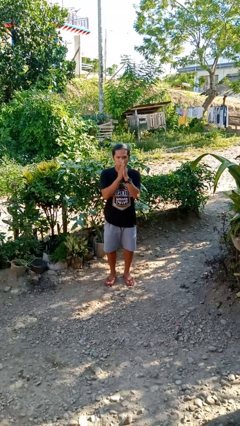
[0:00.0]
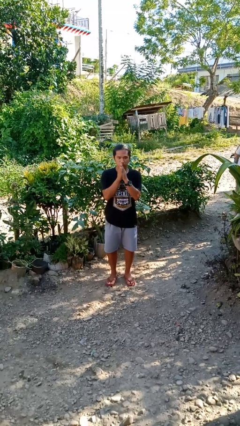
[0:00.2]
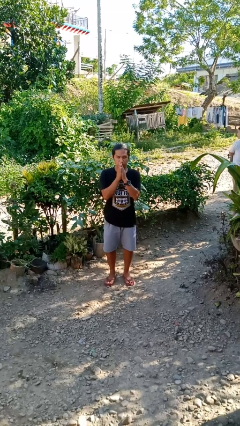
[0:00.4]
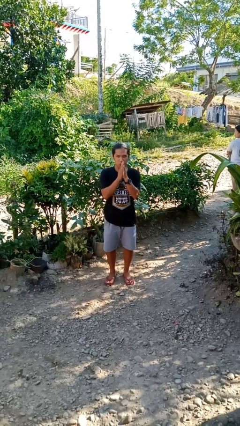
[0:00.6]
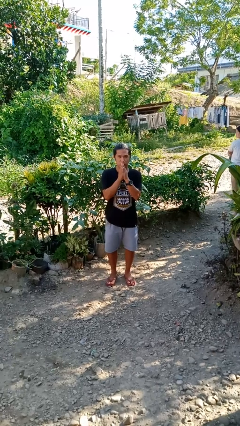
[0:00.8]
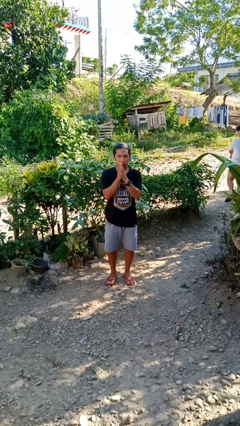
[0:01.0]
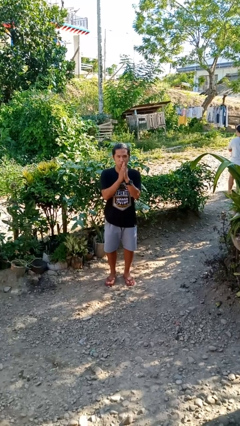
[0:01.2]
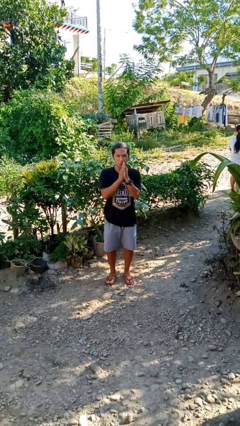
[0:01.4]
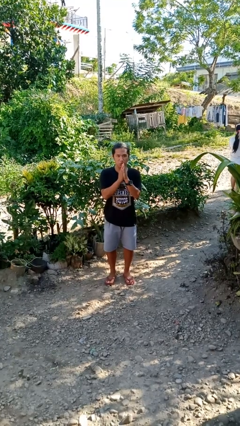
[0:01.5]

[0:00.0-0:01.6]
person blows into hands

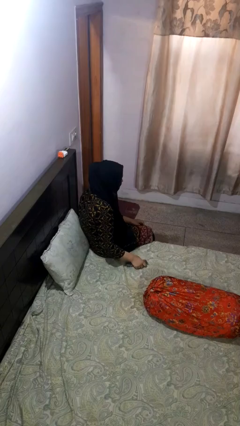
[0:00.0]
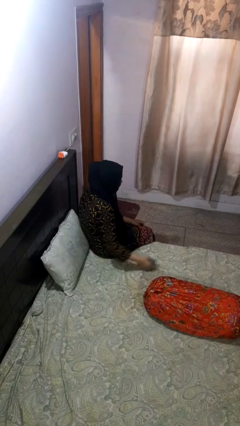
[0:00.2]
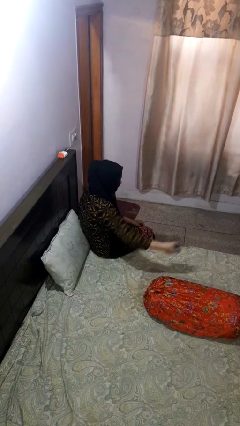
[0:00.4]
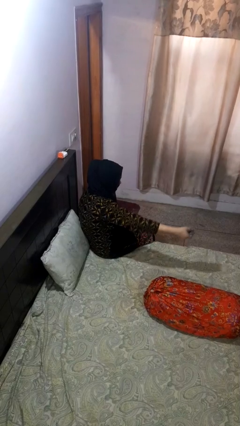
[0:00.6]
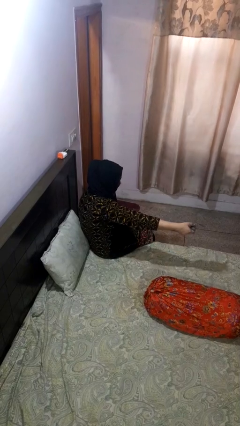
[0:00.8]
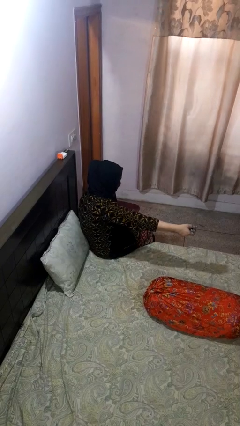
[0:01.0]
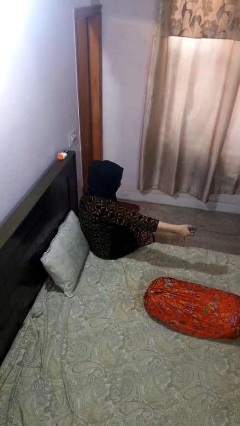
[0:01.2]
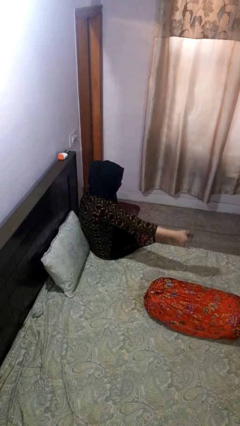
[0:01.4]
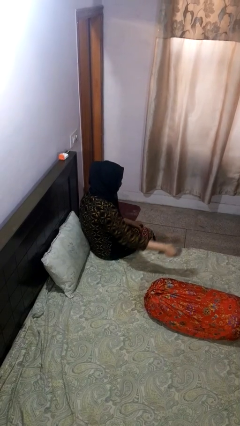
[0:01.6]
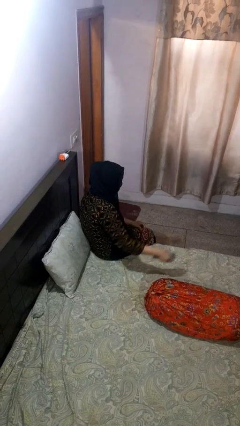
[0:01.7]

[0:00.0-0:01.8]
person uses television remote

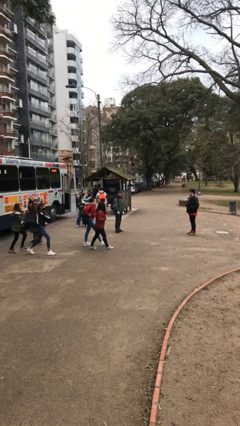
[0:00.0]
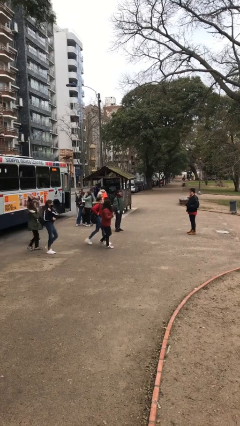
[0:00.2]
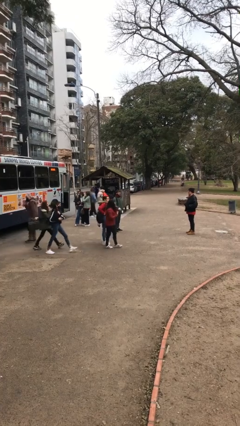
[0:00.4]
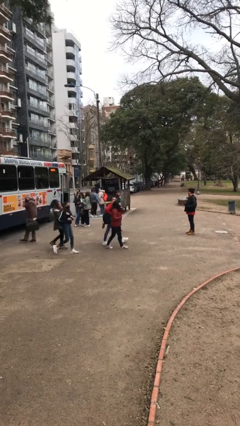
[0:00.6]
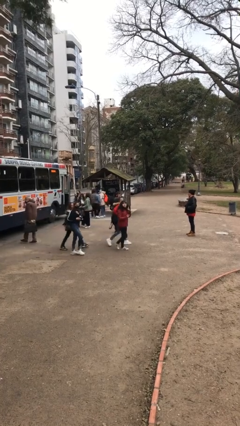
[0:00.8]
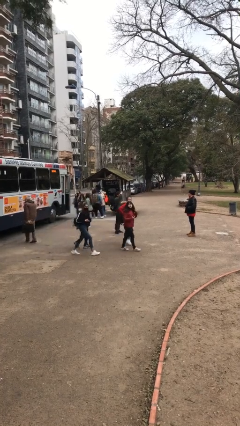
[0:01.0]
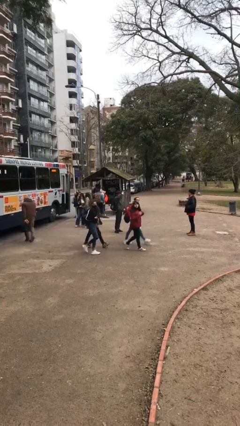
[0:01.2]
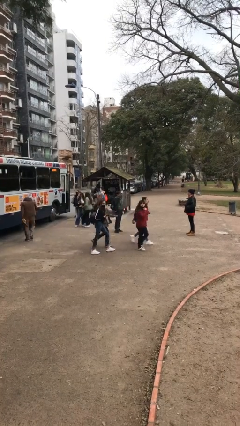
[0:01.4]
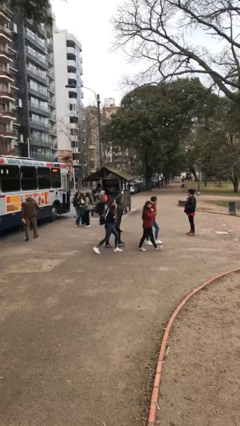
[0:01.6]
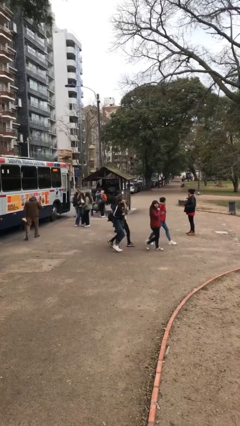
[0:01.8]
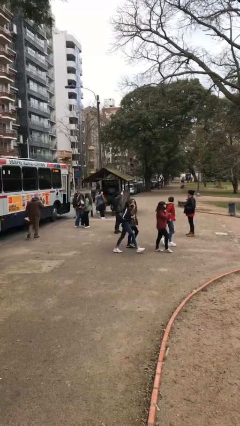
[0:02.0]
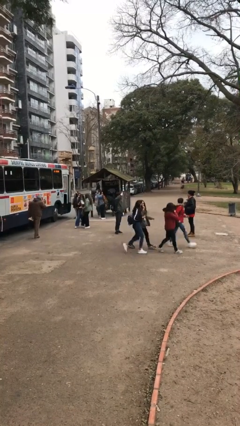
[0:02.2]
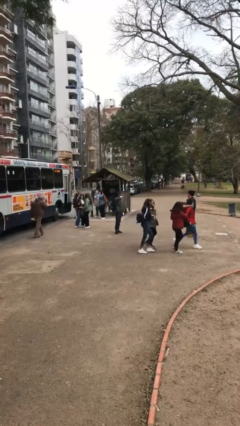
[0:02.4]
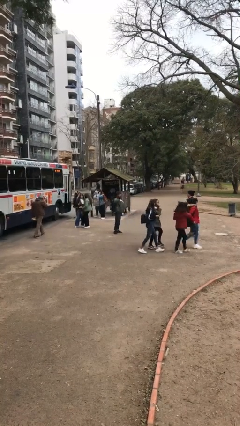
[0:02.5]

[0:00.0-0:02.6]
person waves at person

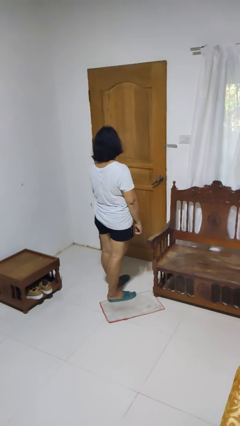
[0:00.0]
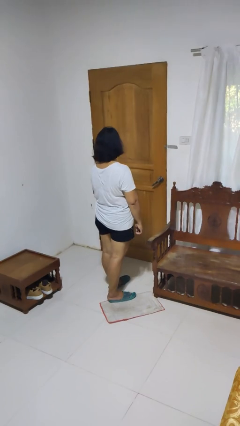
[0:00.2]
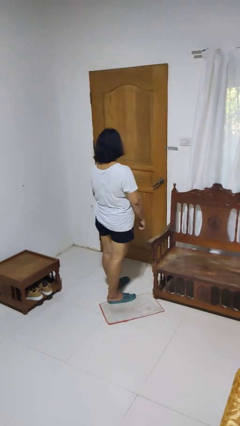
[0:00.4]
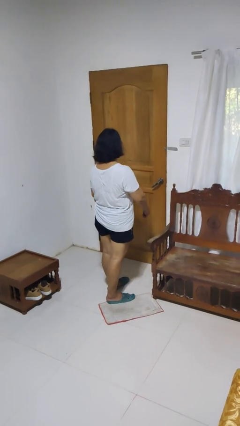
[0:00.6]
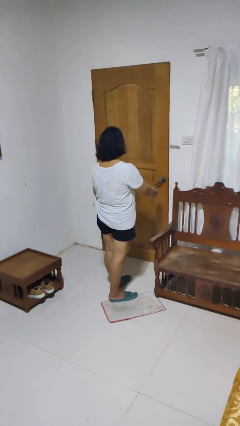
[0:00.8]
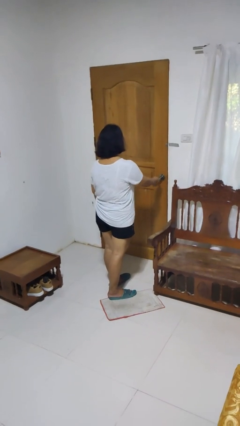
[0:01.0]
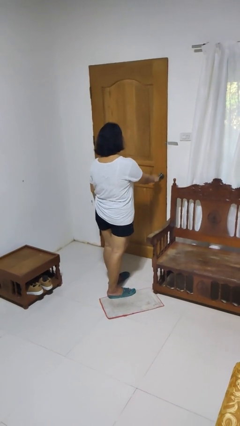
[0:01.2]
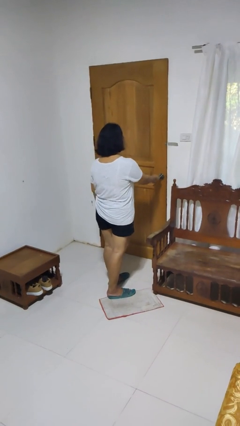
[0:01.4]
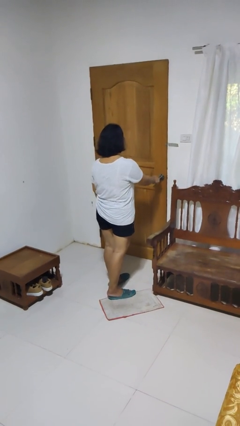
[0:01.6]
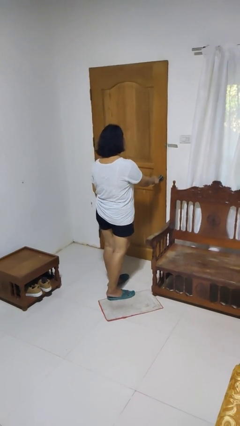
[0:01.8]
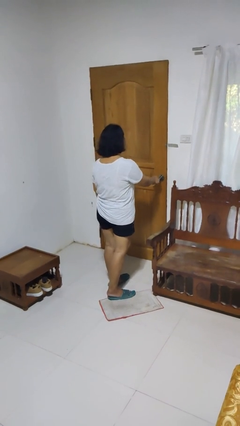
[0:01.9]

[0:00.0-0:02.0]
person unlocks door with keys

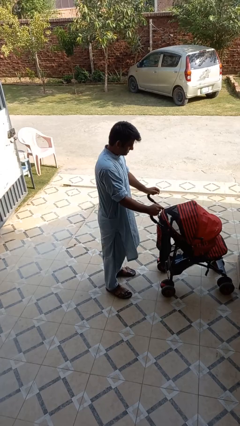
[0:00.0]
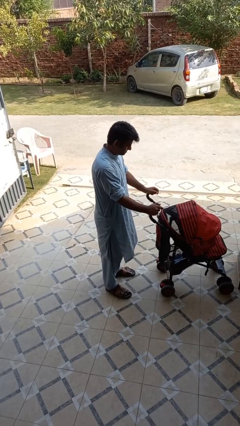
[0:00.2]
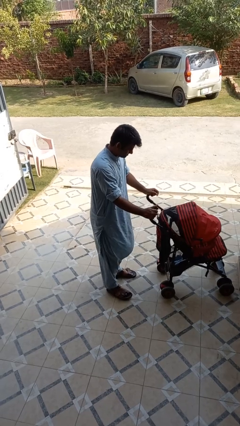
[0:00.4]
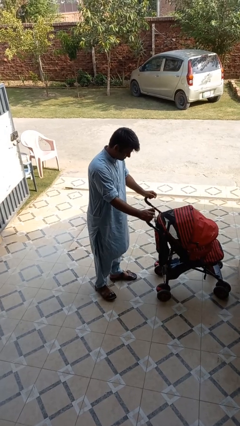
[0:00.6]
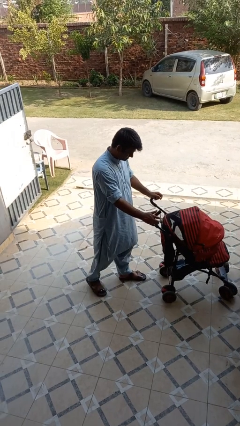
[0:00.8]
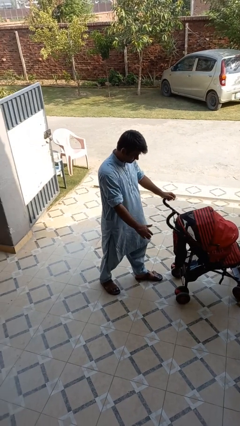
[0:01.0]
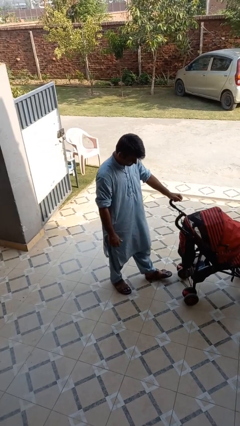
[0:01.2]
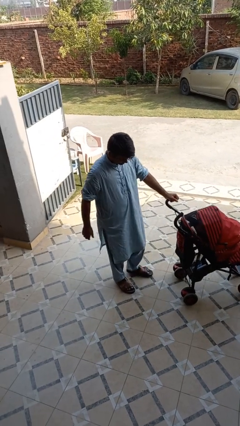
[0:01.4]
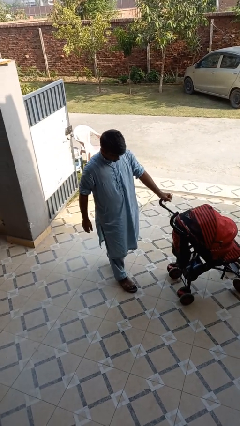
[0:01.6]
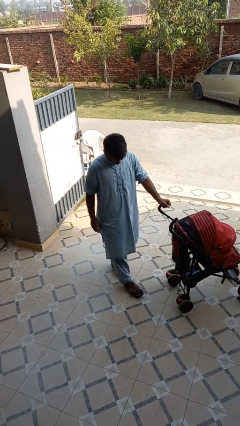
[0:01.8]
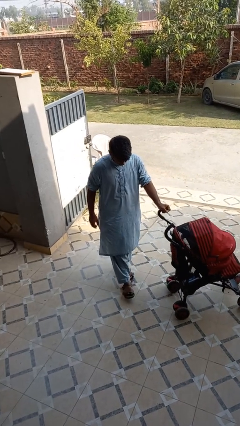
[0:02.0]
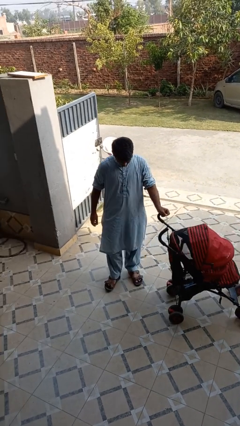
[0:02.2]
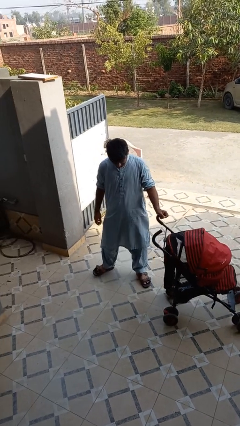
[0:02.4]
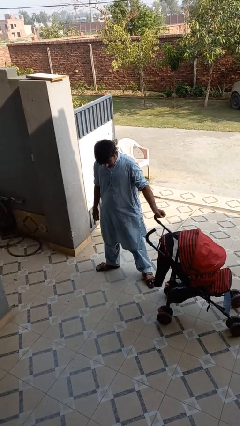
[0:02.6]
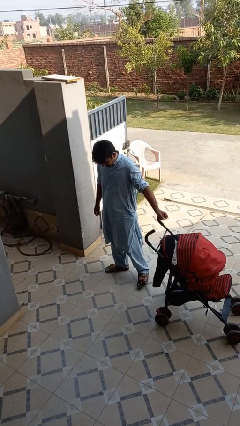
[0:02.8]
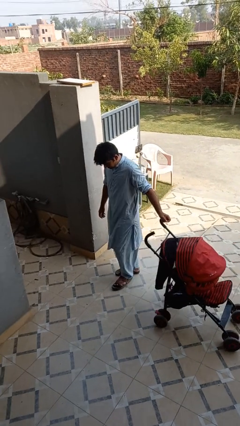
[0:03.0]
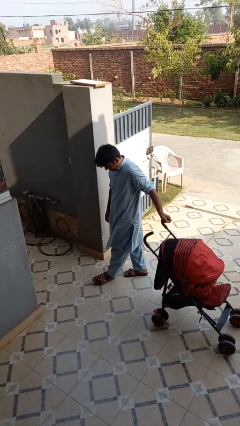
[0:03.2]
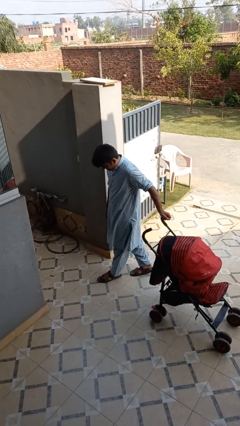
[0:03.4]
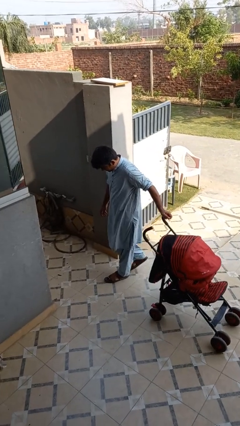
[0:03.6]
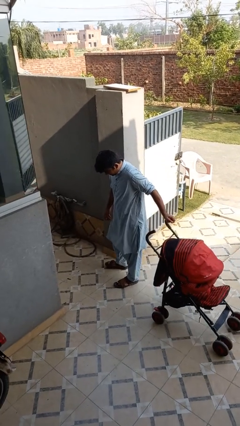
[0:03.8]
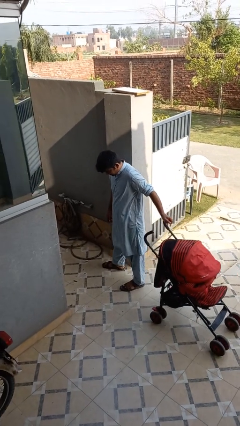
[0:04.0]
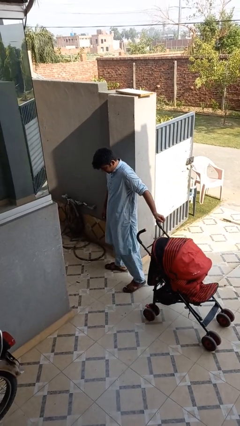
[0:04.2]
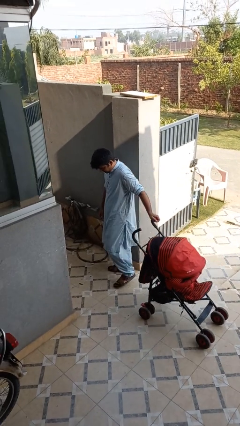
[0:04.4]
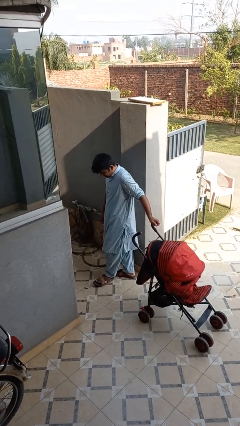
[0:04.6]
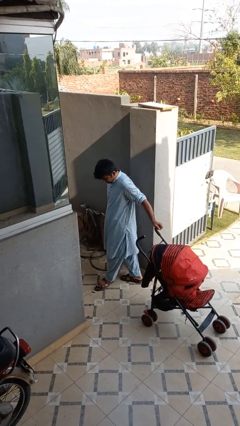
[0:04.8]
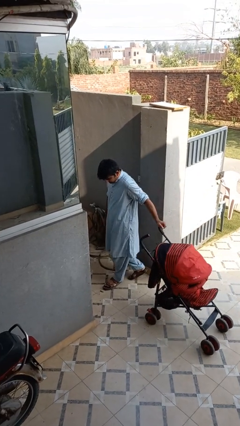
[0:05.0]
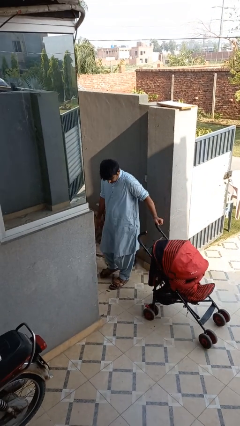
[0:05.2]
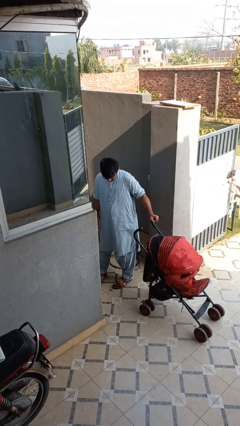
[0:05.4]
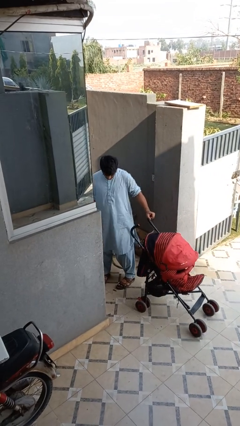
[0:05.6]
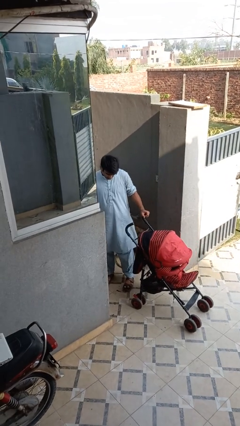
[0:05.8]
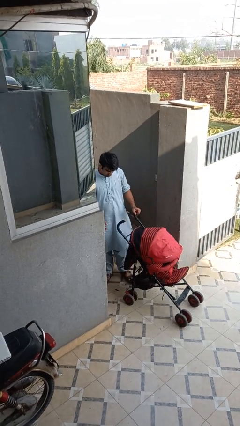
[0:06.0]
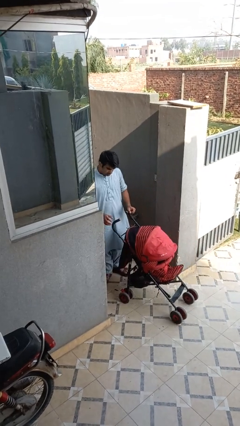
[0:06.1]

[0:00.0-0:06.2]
person pulls wheeled cart

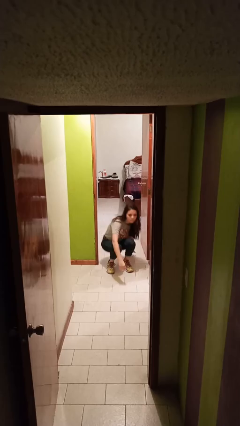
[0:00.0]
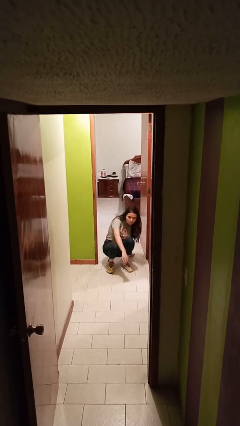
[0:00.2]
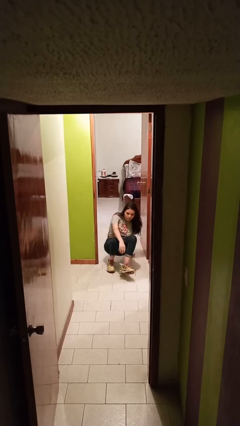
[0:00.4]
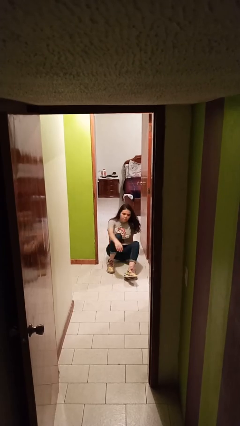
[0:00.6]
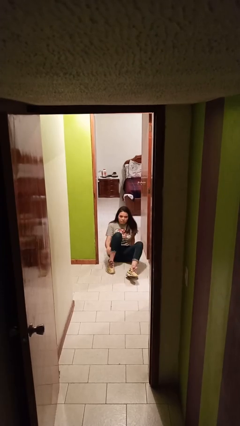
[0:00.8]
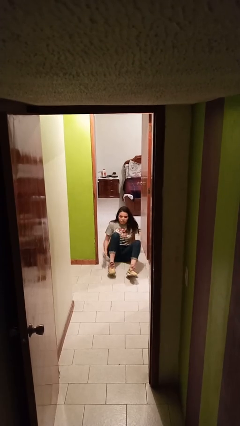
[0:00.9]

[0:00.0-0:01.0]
person sits down

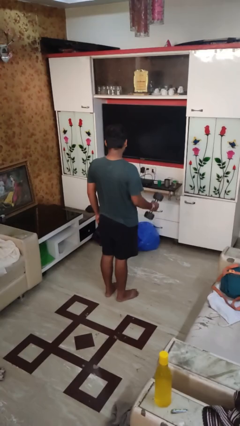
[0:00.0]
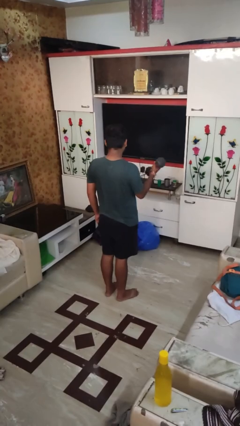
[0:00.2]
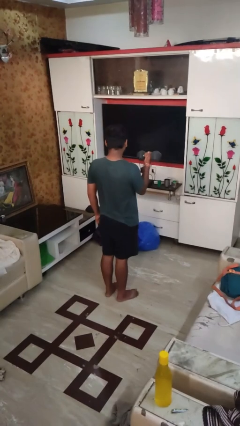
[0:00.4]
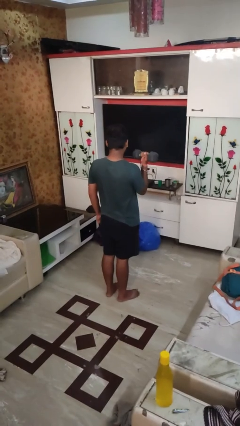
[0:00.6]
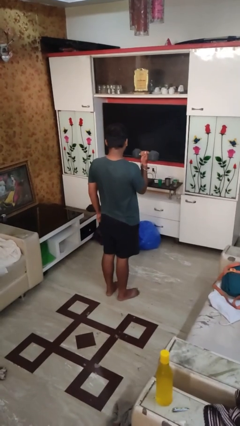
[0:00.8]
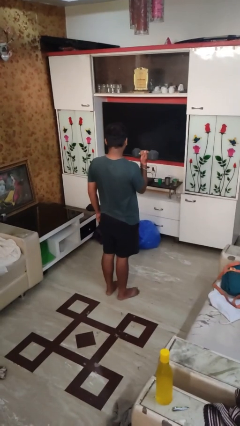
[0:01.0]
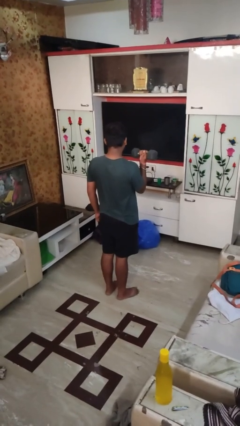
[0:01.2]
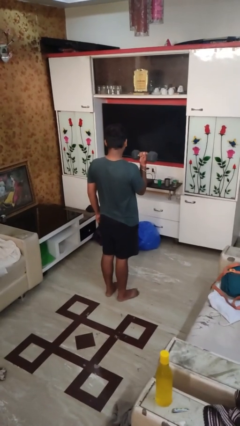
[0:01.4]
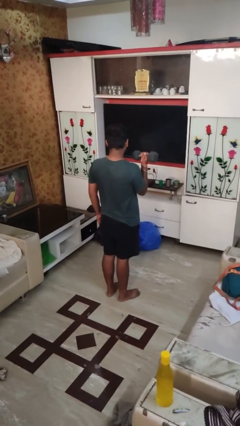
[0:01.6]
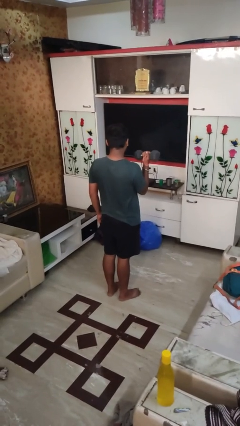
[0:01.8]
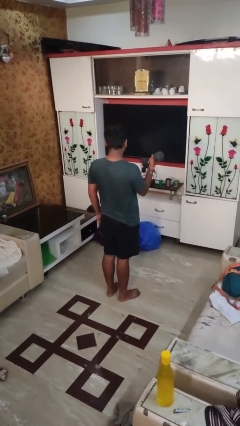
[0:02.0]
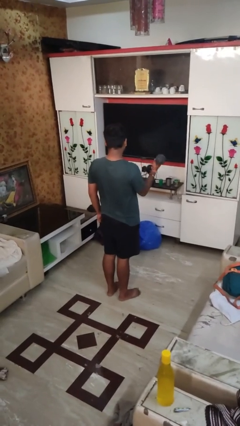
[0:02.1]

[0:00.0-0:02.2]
person lifts dumbbells
